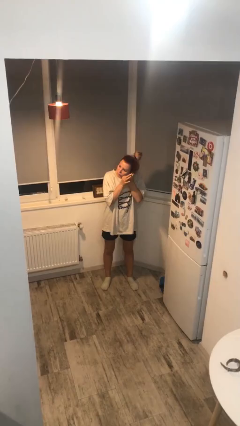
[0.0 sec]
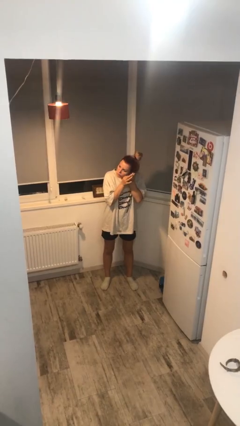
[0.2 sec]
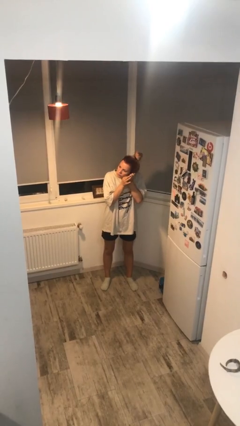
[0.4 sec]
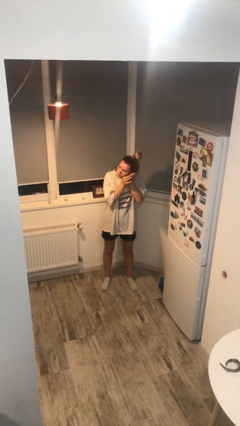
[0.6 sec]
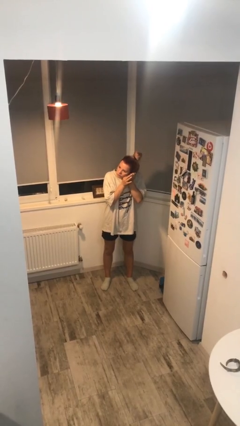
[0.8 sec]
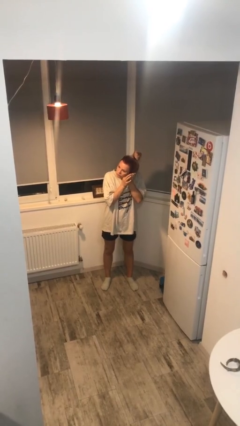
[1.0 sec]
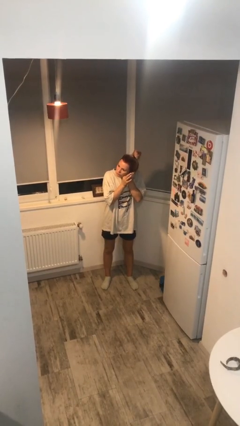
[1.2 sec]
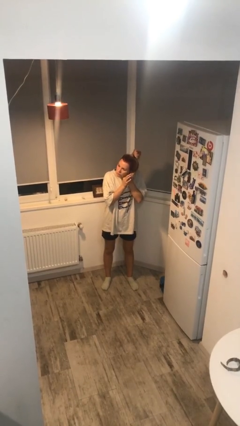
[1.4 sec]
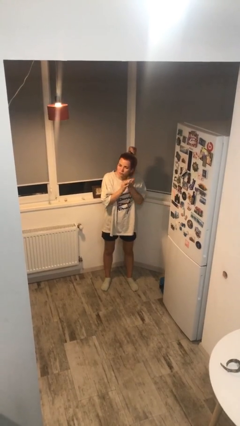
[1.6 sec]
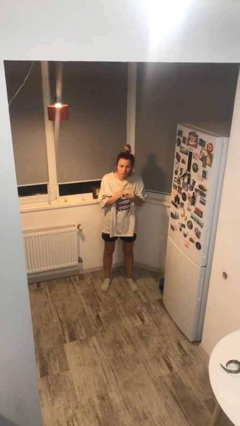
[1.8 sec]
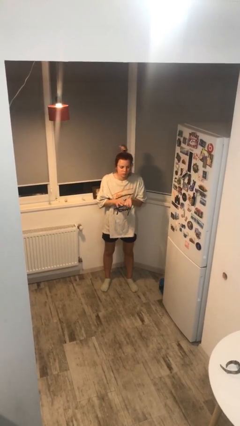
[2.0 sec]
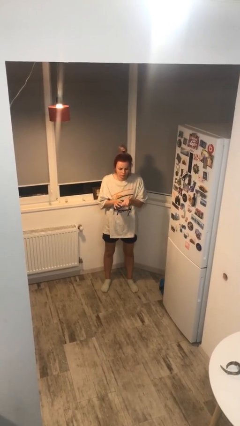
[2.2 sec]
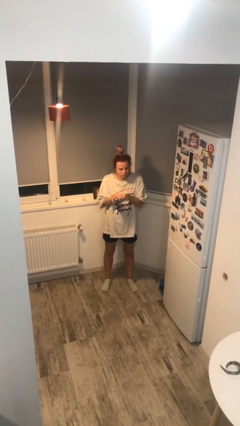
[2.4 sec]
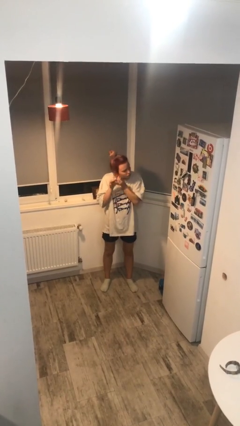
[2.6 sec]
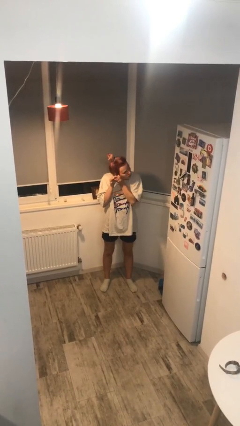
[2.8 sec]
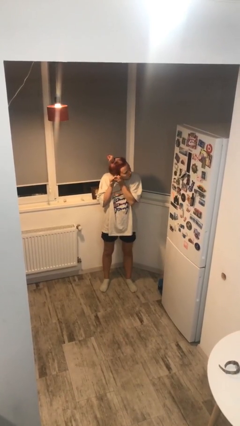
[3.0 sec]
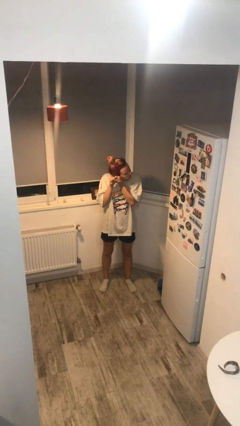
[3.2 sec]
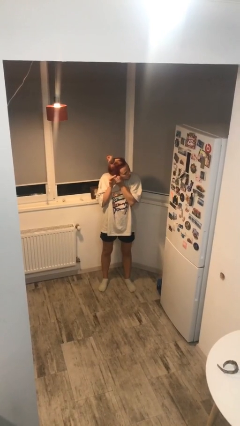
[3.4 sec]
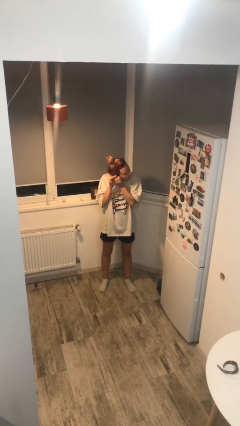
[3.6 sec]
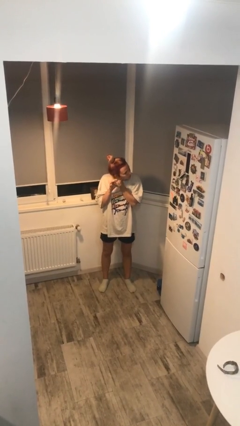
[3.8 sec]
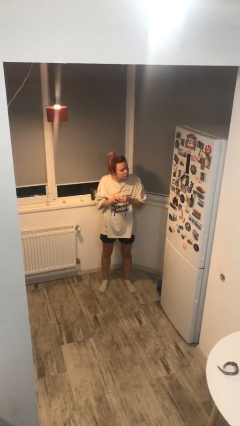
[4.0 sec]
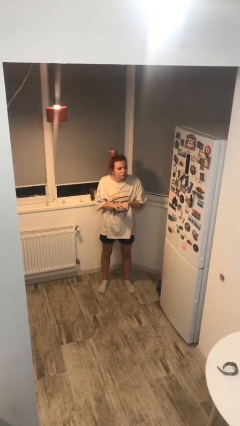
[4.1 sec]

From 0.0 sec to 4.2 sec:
person puts on earrings

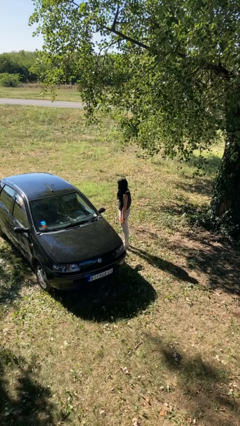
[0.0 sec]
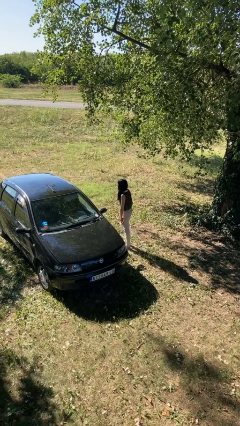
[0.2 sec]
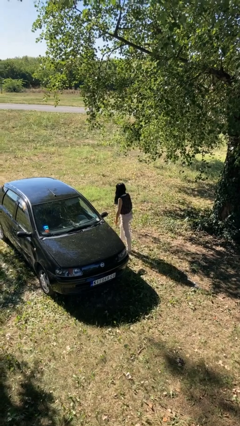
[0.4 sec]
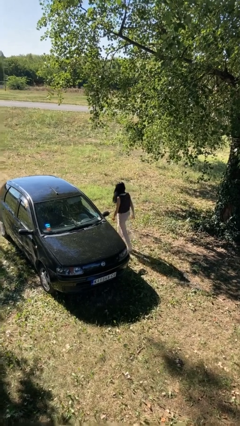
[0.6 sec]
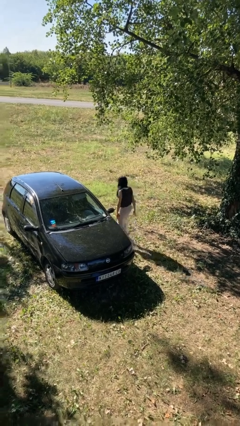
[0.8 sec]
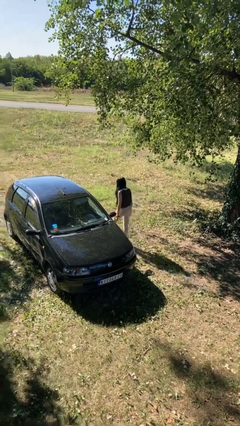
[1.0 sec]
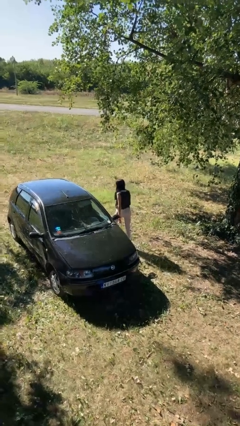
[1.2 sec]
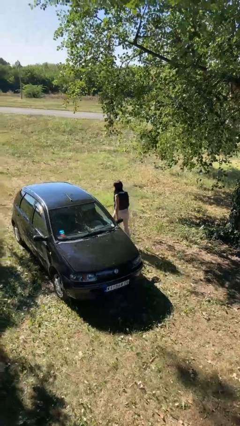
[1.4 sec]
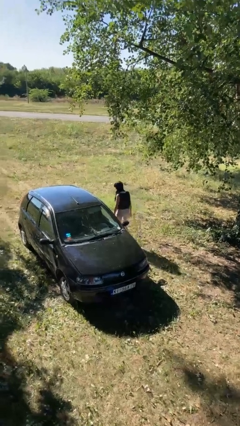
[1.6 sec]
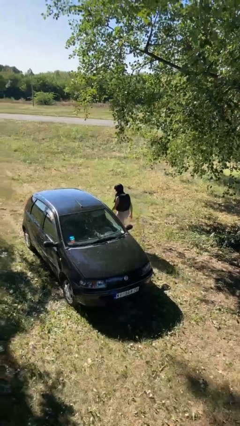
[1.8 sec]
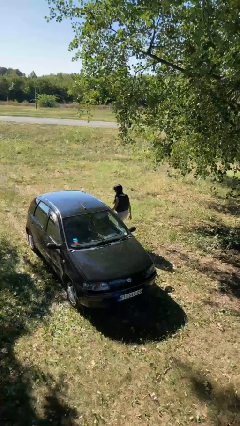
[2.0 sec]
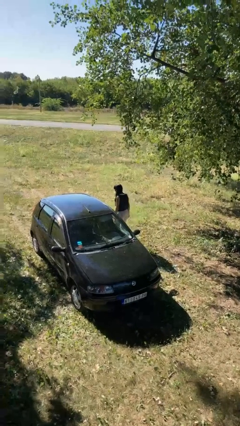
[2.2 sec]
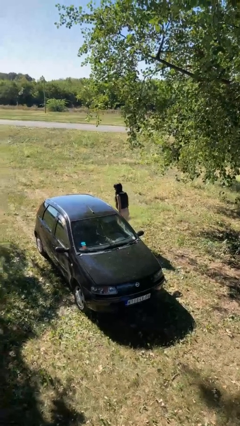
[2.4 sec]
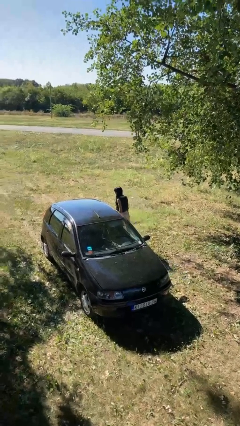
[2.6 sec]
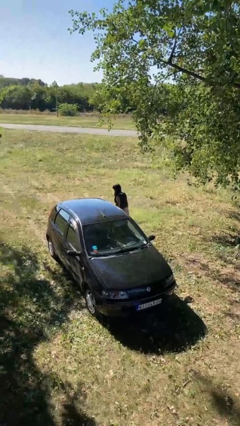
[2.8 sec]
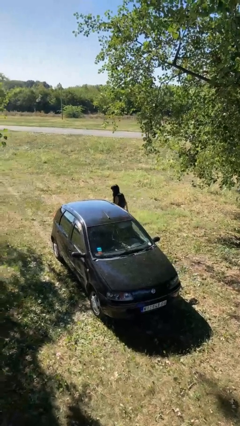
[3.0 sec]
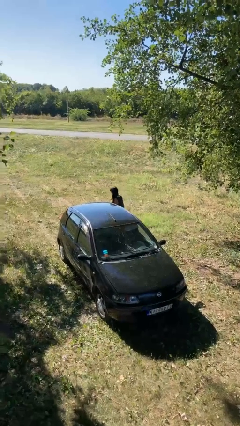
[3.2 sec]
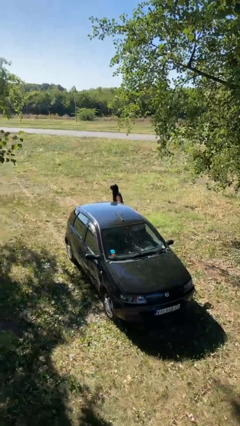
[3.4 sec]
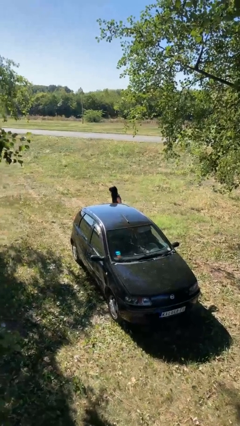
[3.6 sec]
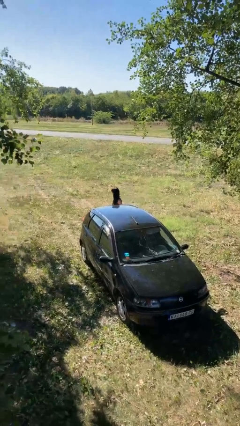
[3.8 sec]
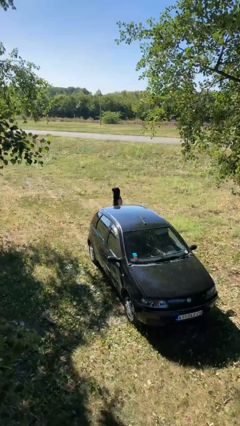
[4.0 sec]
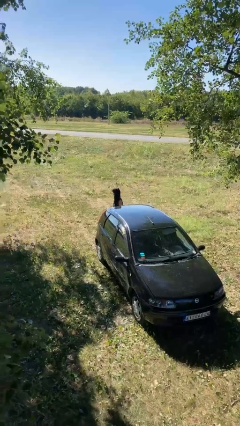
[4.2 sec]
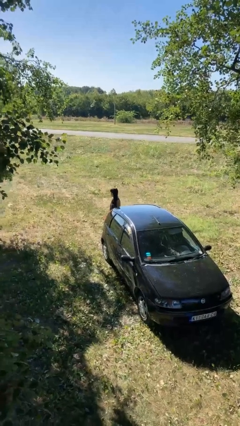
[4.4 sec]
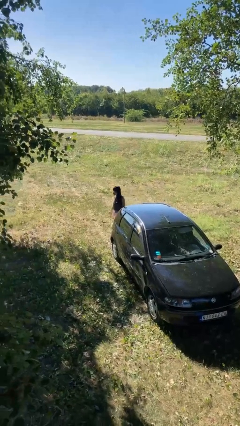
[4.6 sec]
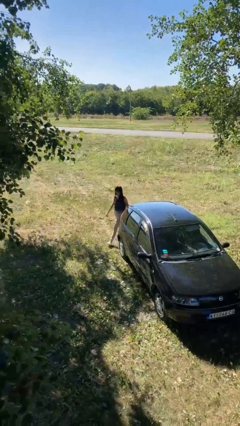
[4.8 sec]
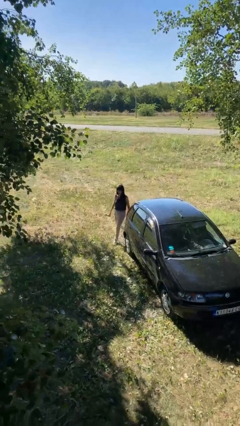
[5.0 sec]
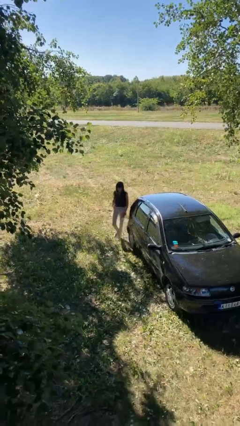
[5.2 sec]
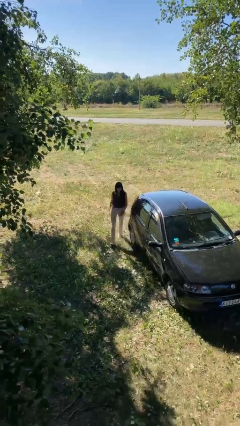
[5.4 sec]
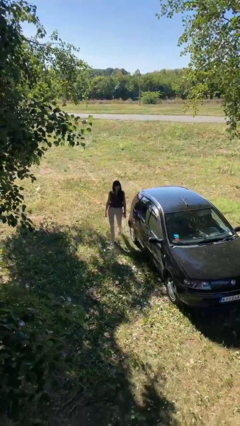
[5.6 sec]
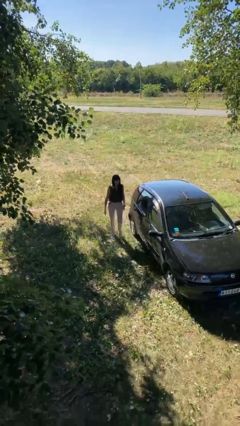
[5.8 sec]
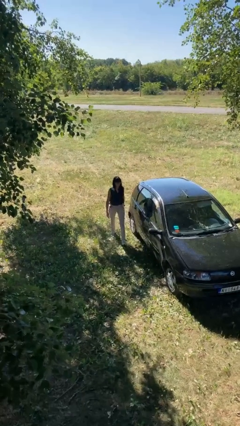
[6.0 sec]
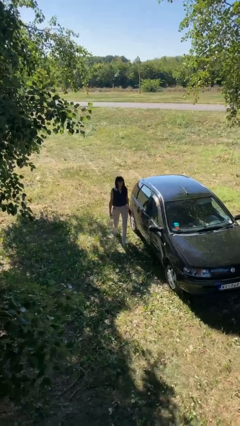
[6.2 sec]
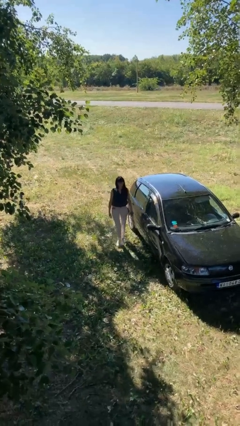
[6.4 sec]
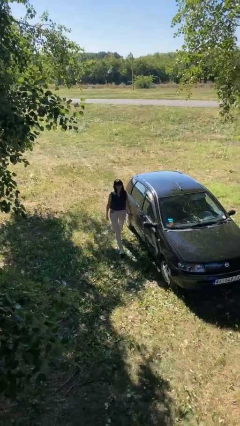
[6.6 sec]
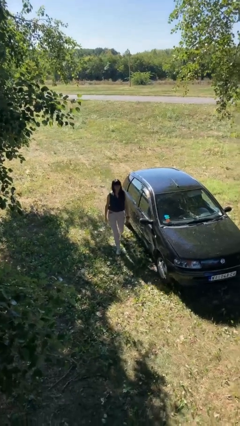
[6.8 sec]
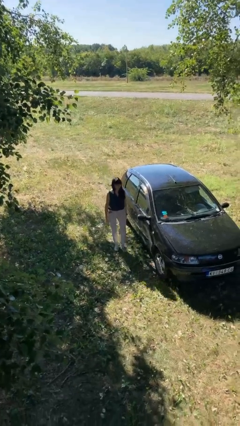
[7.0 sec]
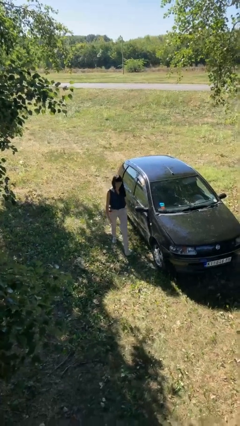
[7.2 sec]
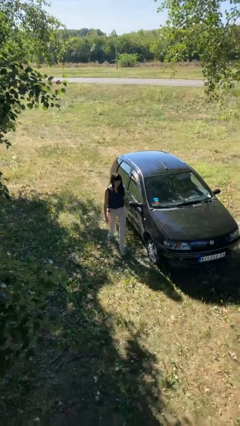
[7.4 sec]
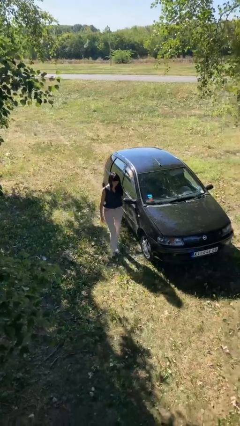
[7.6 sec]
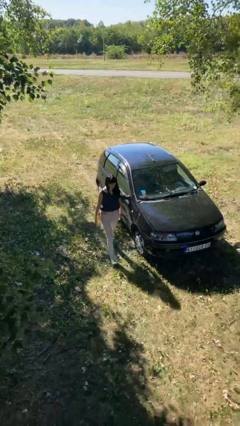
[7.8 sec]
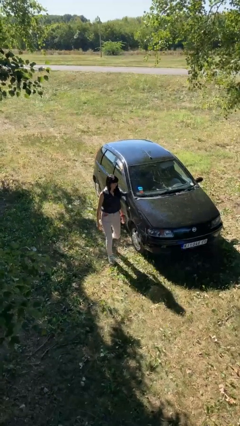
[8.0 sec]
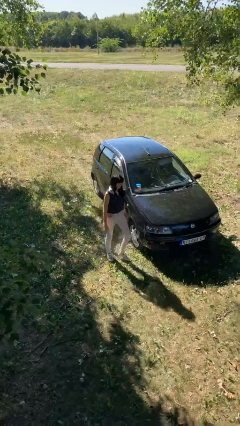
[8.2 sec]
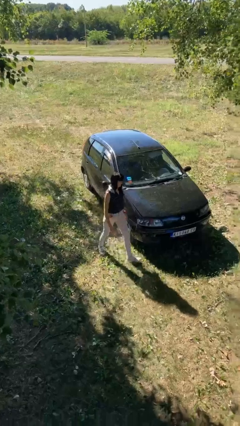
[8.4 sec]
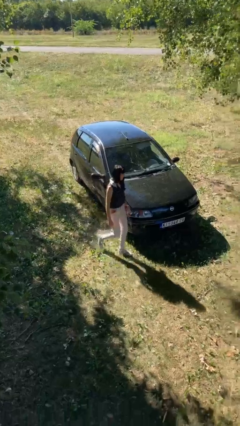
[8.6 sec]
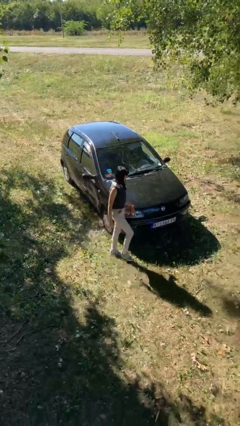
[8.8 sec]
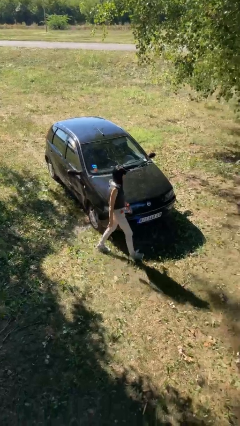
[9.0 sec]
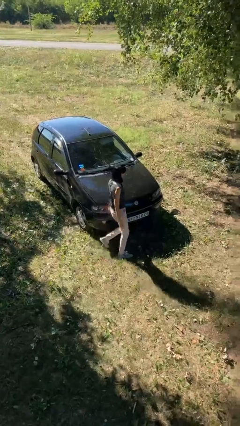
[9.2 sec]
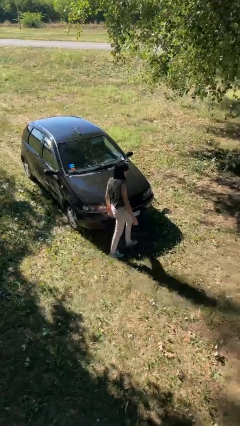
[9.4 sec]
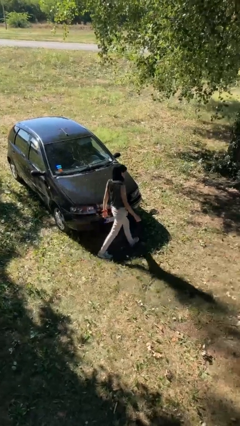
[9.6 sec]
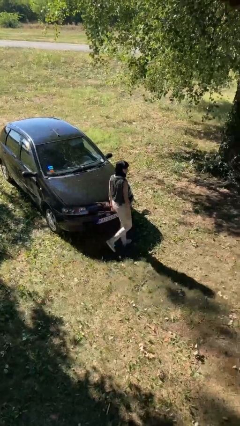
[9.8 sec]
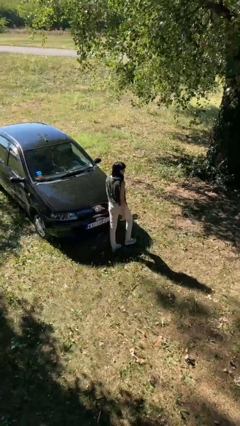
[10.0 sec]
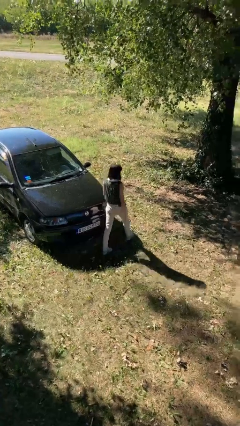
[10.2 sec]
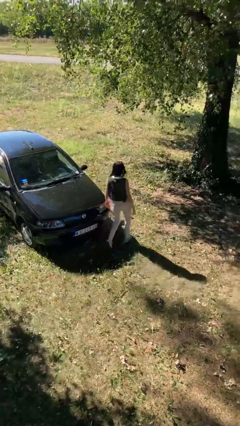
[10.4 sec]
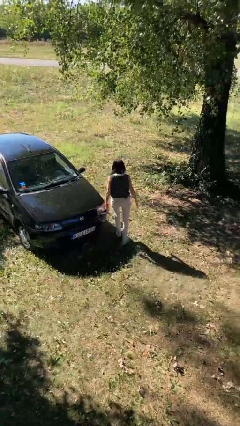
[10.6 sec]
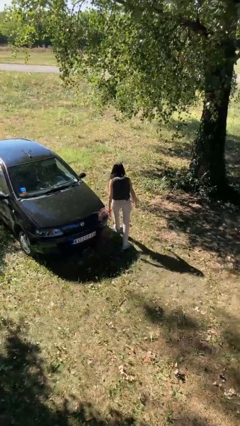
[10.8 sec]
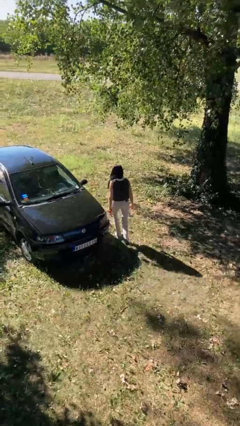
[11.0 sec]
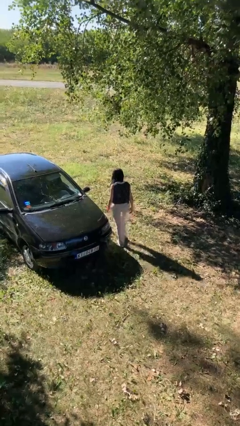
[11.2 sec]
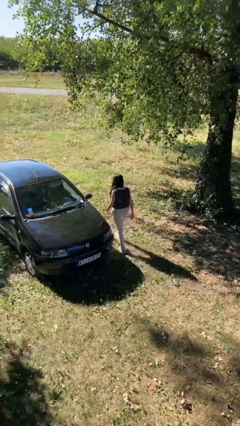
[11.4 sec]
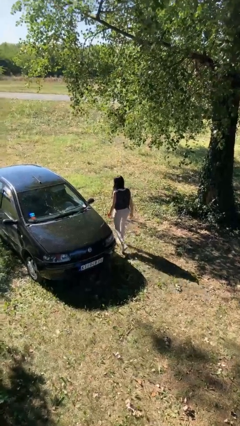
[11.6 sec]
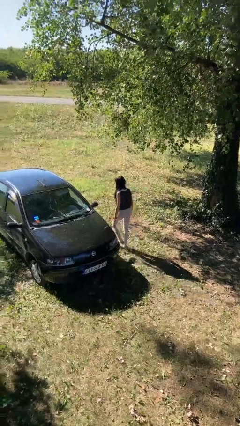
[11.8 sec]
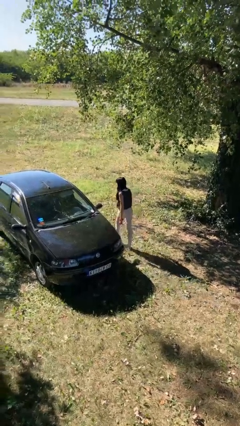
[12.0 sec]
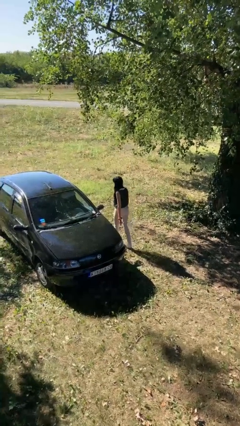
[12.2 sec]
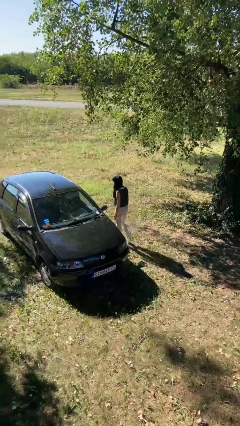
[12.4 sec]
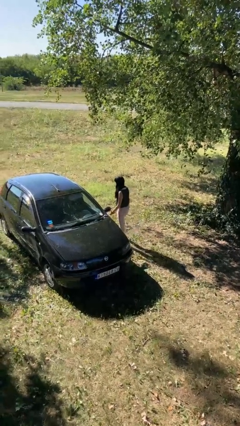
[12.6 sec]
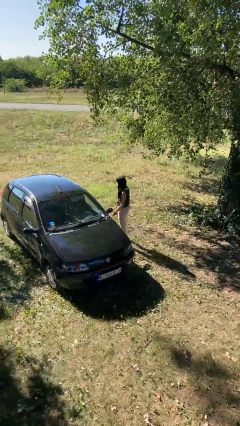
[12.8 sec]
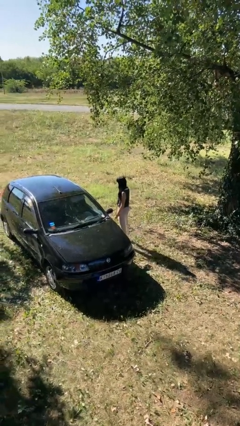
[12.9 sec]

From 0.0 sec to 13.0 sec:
person walks around car

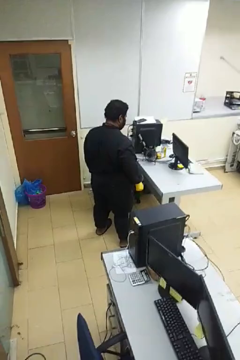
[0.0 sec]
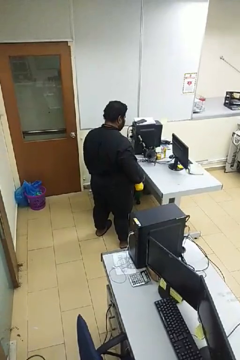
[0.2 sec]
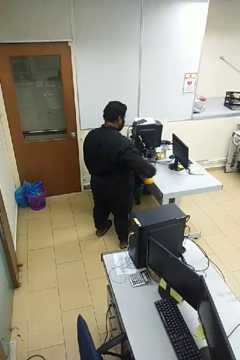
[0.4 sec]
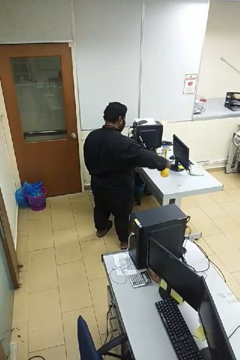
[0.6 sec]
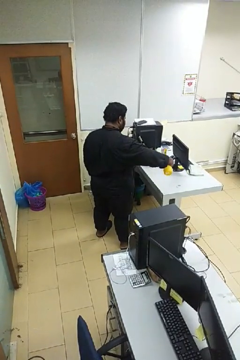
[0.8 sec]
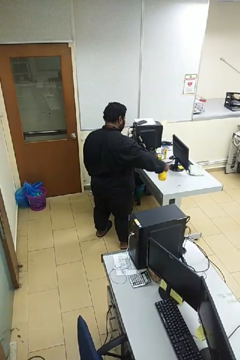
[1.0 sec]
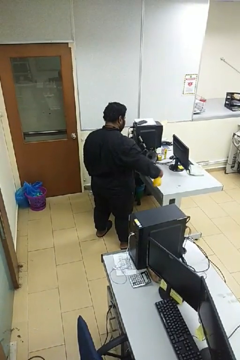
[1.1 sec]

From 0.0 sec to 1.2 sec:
person sprays from bottle
